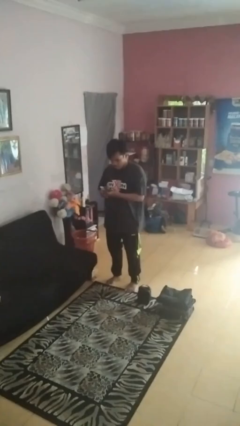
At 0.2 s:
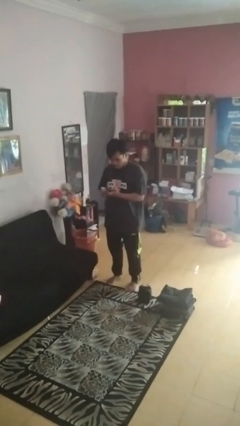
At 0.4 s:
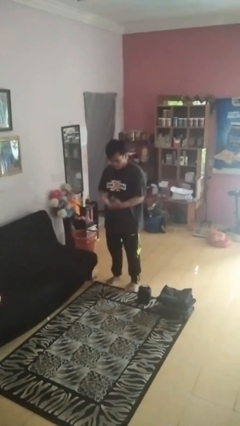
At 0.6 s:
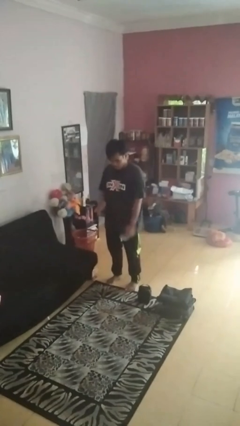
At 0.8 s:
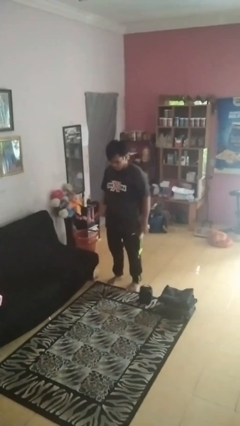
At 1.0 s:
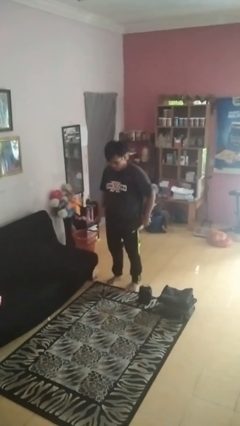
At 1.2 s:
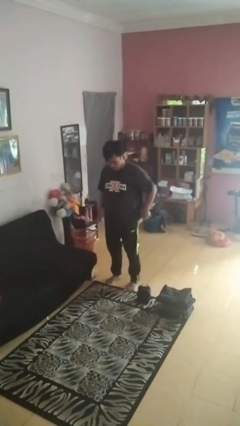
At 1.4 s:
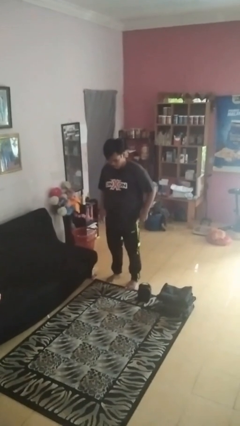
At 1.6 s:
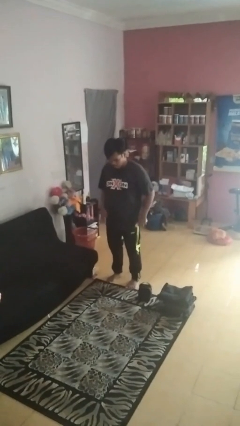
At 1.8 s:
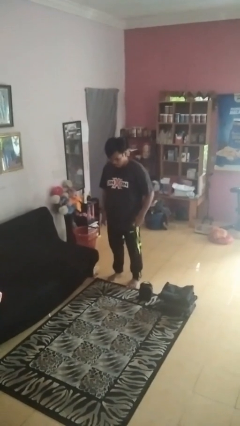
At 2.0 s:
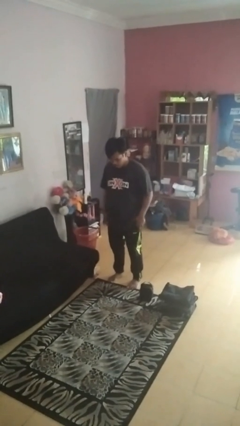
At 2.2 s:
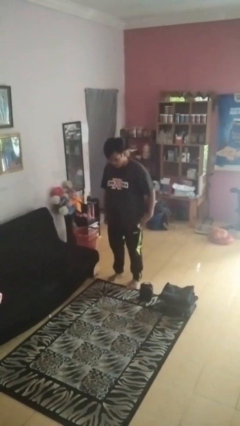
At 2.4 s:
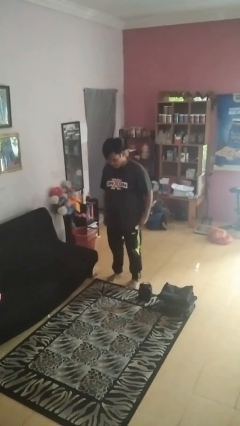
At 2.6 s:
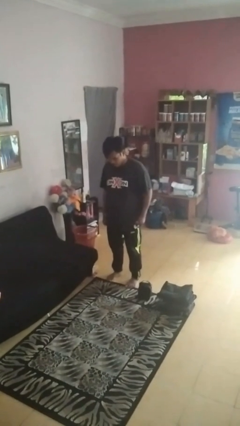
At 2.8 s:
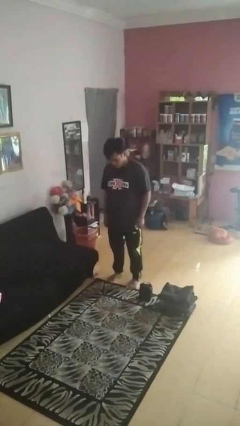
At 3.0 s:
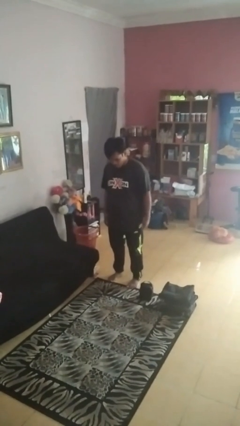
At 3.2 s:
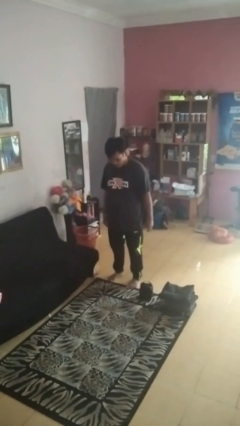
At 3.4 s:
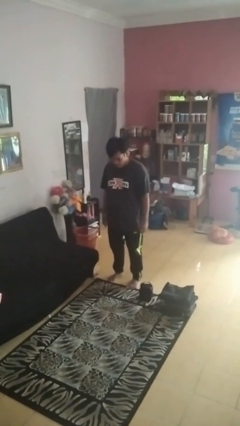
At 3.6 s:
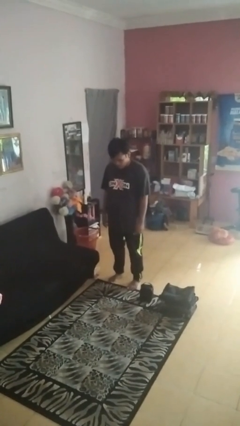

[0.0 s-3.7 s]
person puts phone into pocket

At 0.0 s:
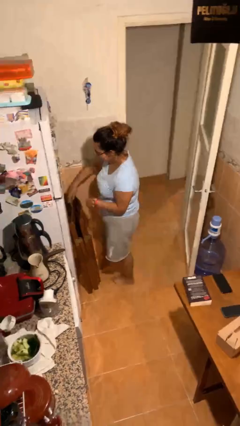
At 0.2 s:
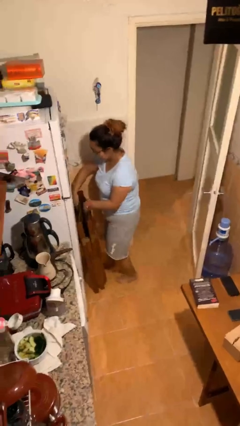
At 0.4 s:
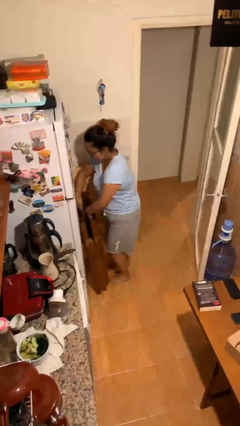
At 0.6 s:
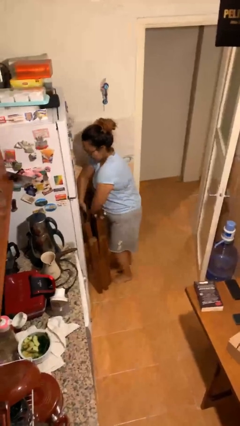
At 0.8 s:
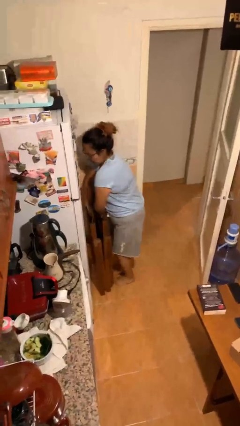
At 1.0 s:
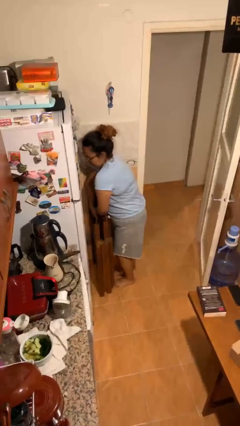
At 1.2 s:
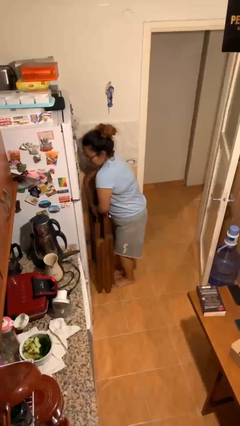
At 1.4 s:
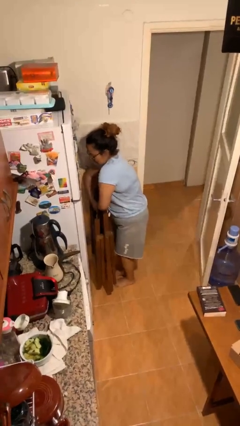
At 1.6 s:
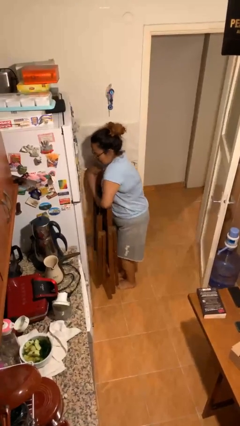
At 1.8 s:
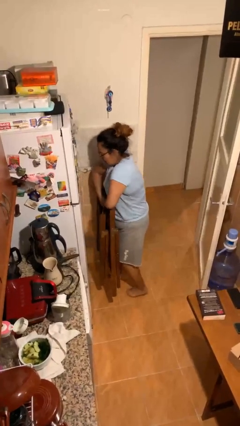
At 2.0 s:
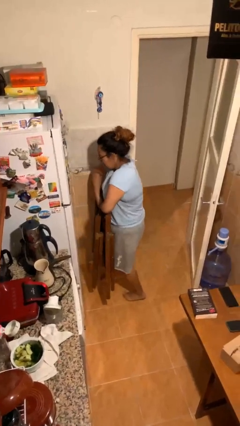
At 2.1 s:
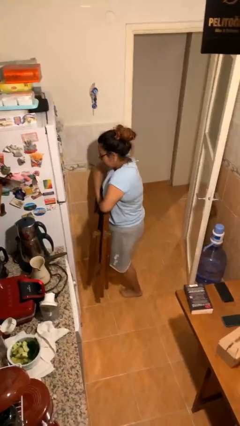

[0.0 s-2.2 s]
person picks up object from floor

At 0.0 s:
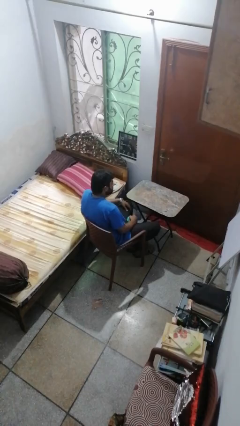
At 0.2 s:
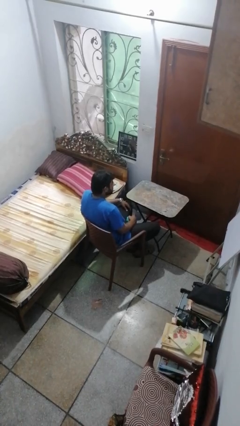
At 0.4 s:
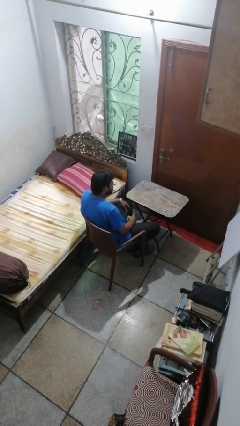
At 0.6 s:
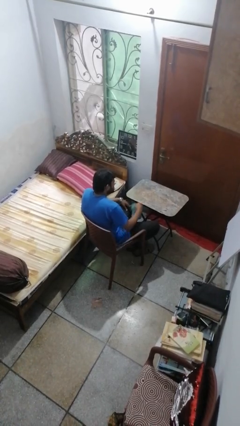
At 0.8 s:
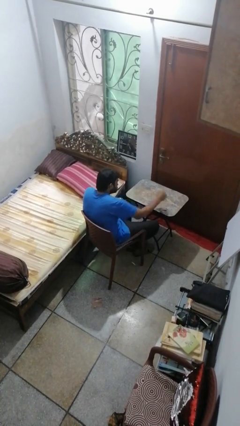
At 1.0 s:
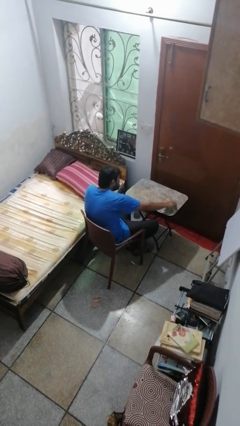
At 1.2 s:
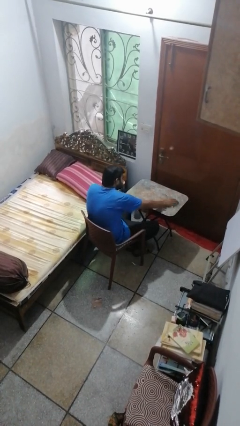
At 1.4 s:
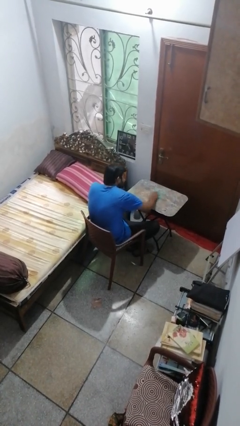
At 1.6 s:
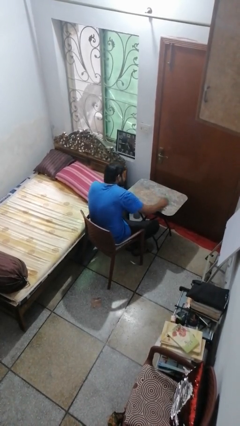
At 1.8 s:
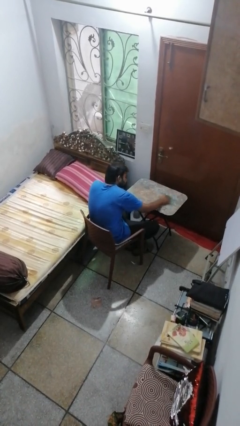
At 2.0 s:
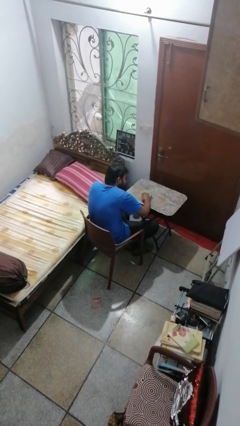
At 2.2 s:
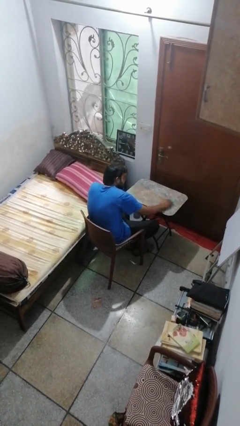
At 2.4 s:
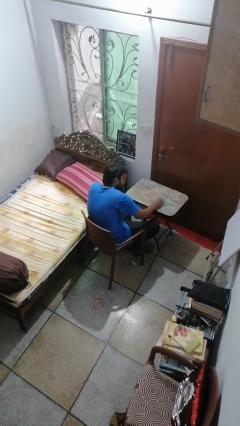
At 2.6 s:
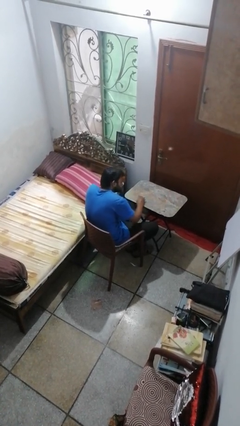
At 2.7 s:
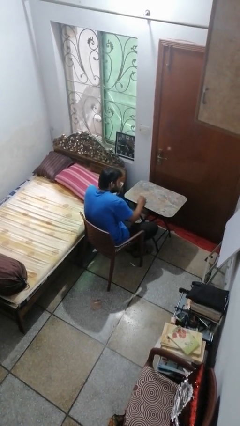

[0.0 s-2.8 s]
person cleans table with rag

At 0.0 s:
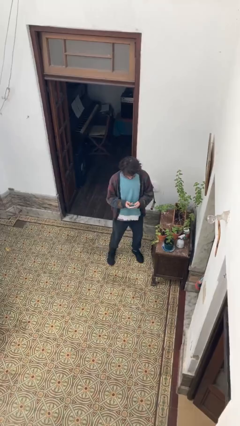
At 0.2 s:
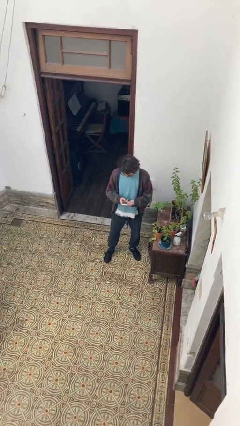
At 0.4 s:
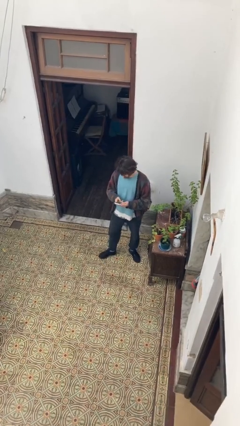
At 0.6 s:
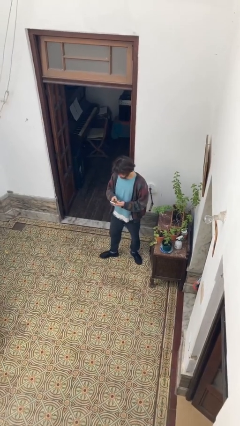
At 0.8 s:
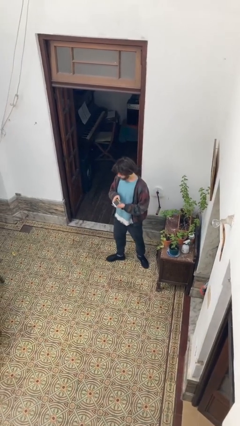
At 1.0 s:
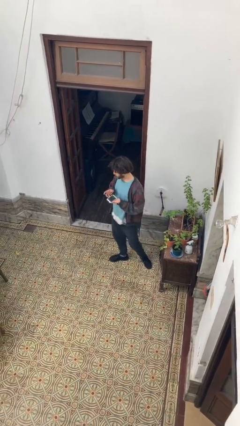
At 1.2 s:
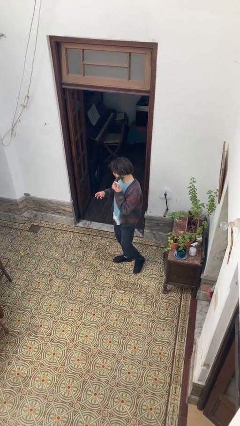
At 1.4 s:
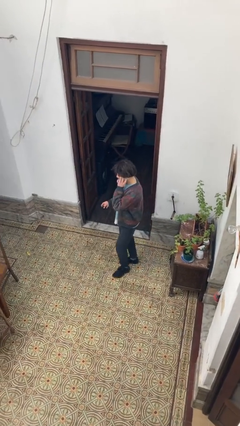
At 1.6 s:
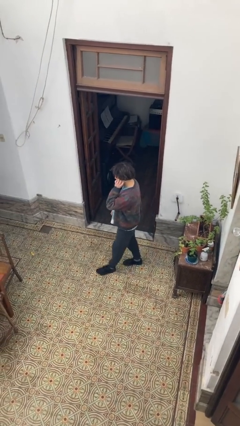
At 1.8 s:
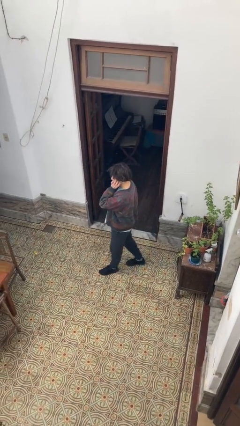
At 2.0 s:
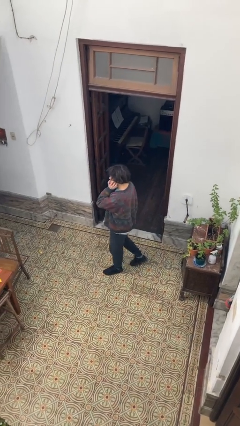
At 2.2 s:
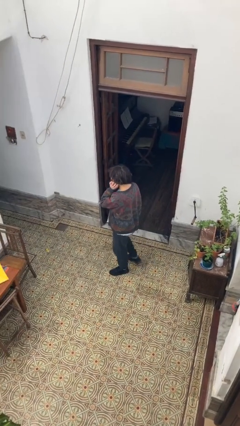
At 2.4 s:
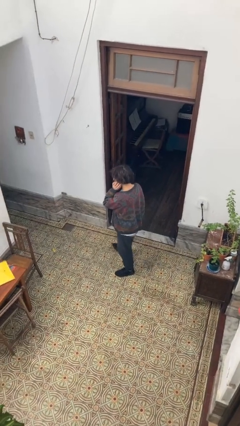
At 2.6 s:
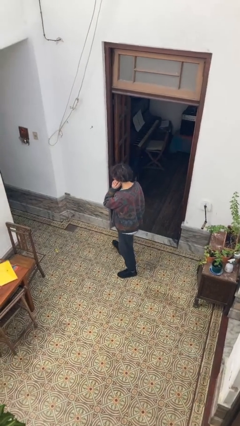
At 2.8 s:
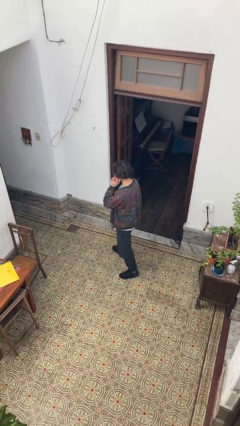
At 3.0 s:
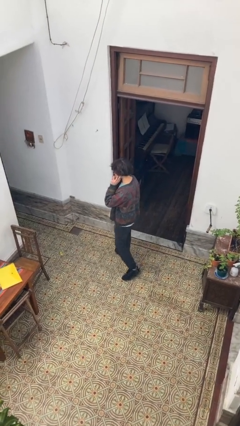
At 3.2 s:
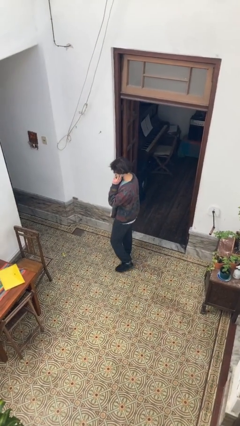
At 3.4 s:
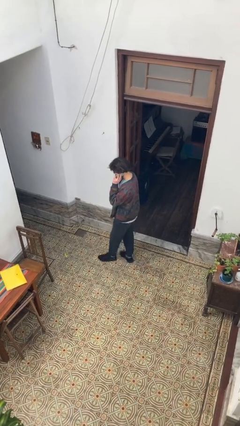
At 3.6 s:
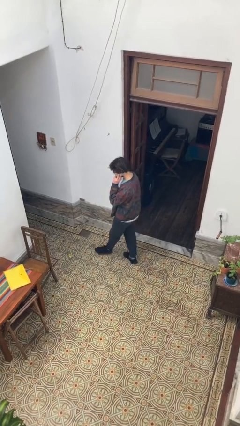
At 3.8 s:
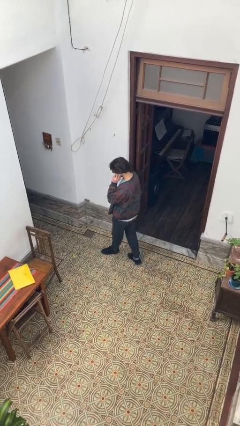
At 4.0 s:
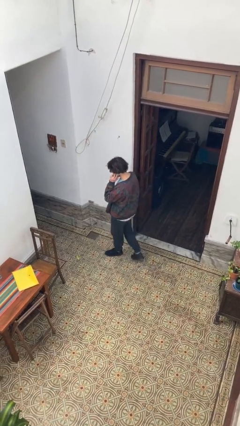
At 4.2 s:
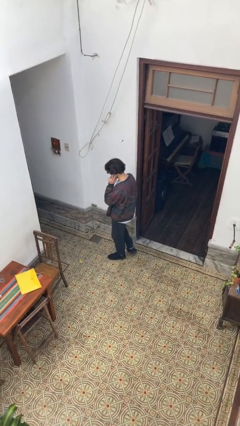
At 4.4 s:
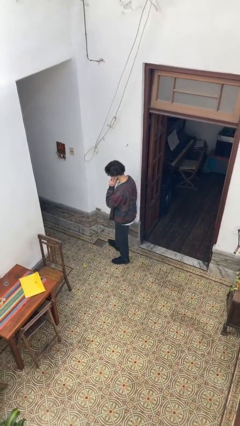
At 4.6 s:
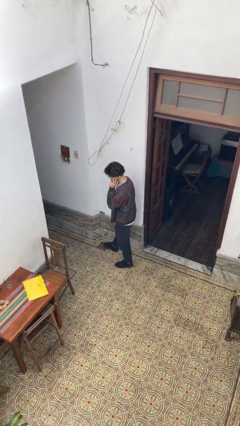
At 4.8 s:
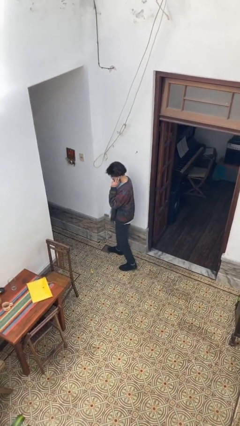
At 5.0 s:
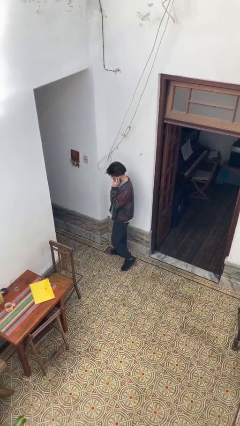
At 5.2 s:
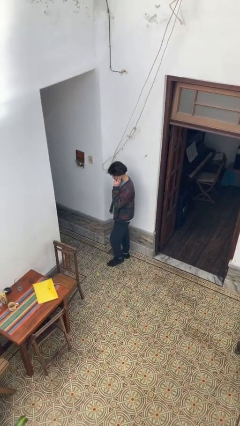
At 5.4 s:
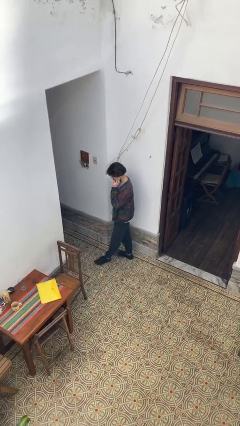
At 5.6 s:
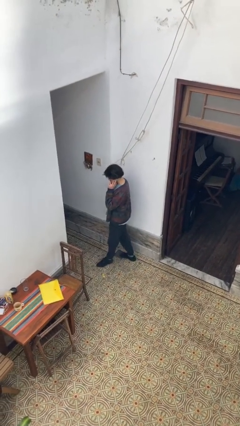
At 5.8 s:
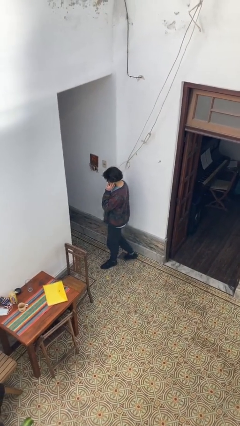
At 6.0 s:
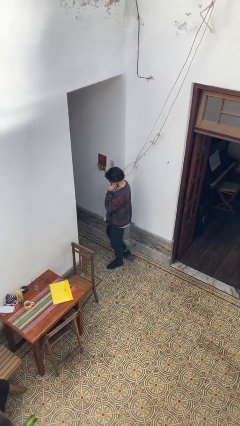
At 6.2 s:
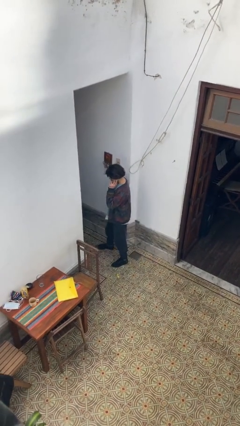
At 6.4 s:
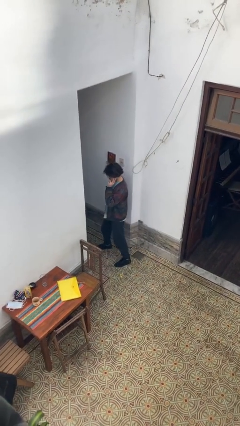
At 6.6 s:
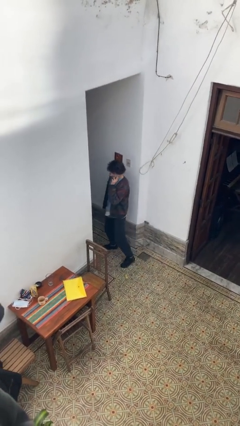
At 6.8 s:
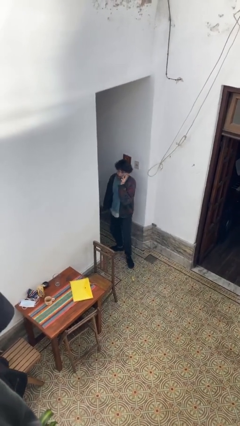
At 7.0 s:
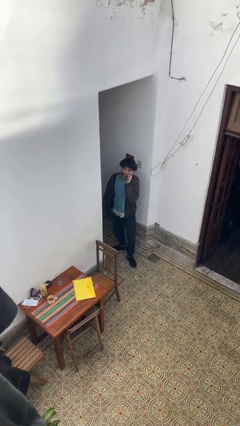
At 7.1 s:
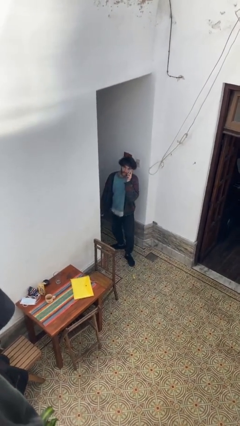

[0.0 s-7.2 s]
person talks on phone

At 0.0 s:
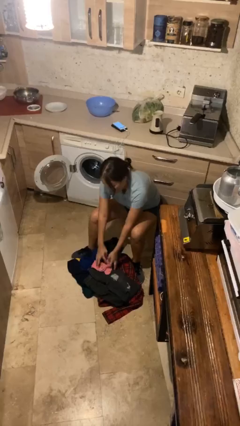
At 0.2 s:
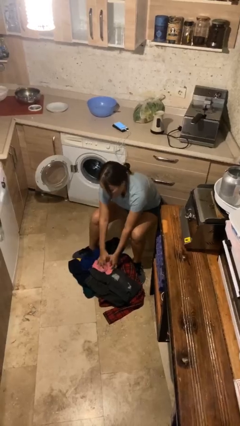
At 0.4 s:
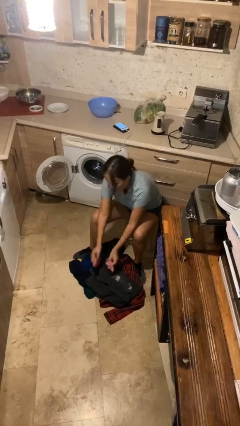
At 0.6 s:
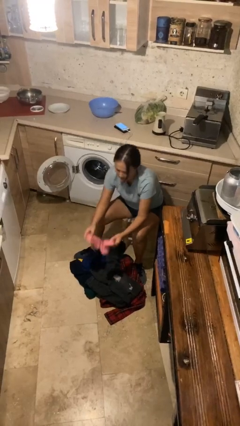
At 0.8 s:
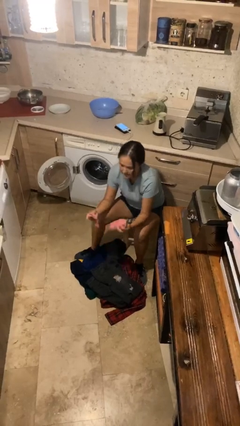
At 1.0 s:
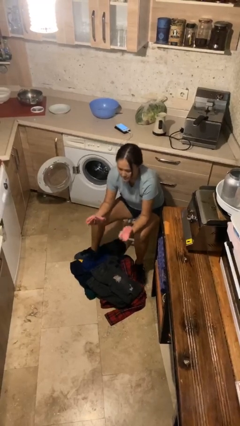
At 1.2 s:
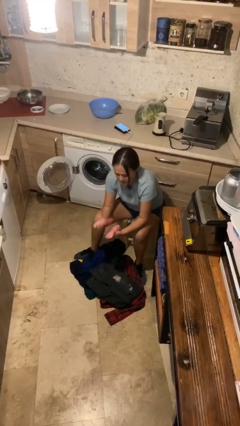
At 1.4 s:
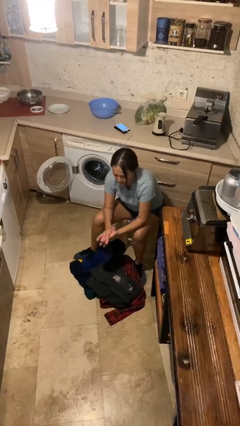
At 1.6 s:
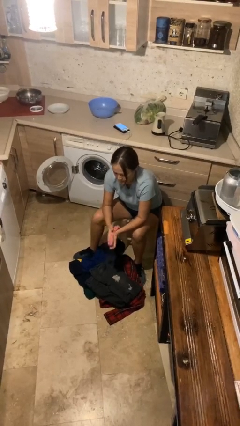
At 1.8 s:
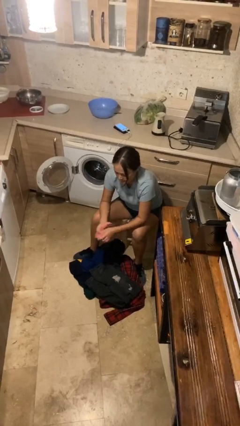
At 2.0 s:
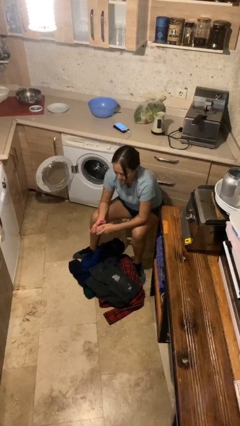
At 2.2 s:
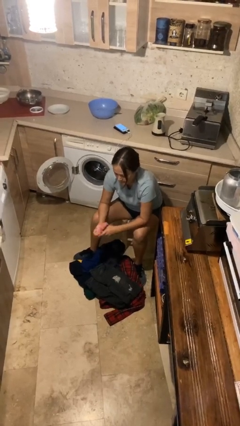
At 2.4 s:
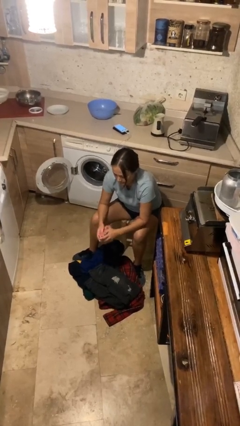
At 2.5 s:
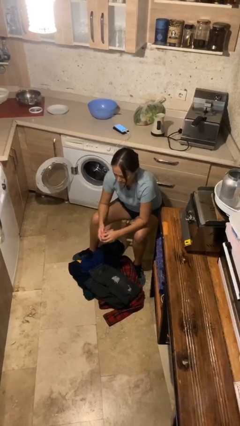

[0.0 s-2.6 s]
person folds socks
